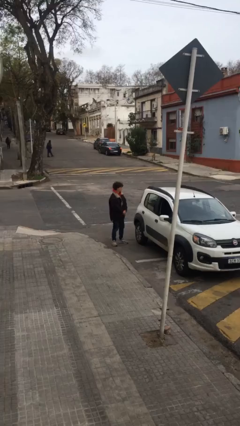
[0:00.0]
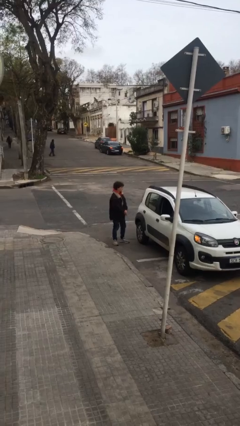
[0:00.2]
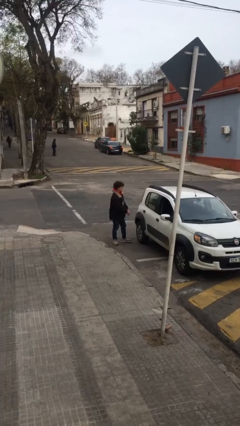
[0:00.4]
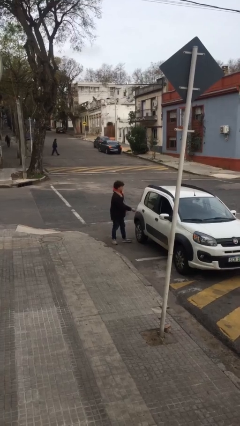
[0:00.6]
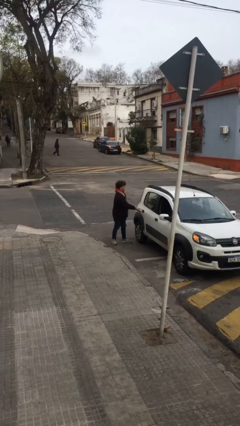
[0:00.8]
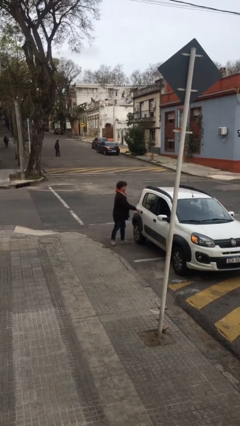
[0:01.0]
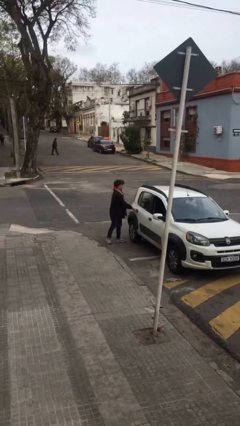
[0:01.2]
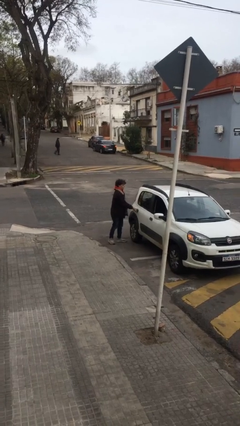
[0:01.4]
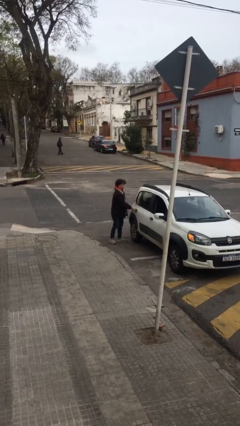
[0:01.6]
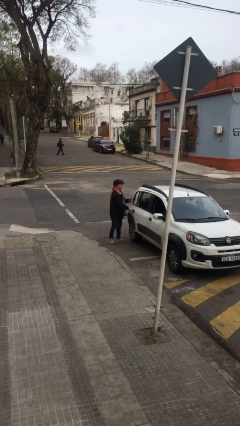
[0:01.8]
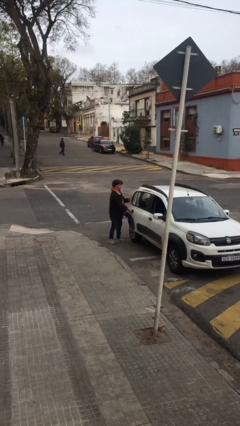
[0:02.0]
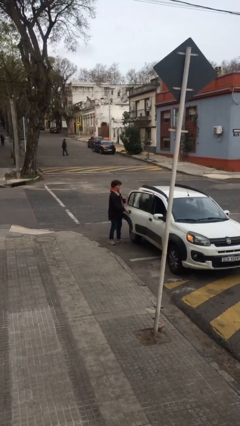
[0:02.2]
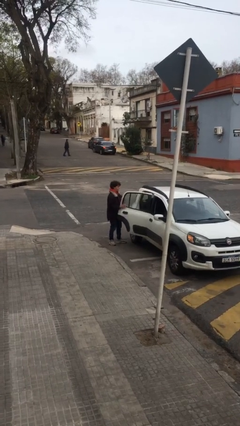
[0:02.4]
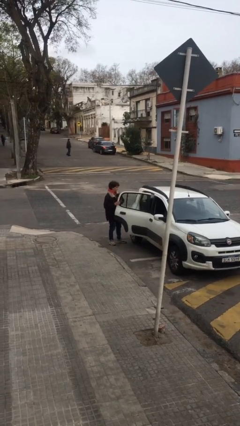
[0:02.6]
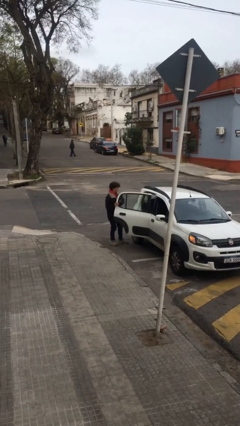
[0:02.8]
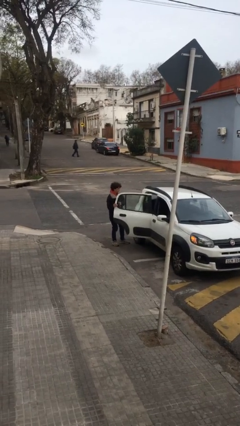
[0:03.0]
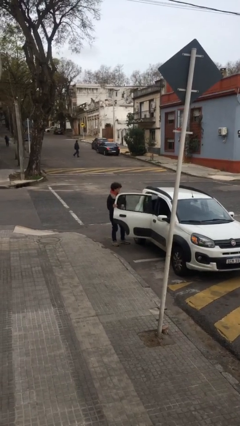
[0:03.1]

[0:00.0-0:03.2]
person opens car door

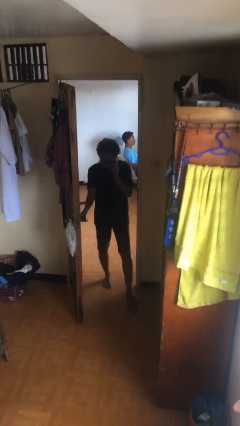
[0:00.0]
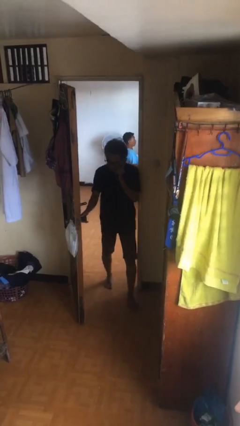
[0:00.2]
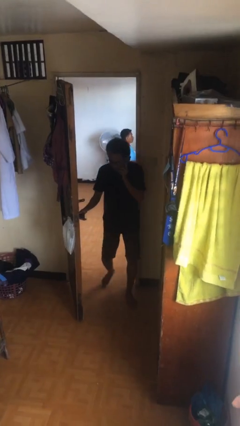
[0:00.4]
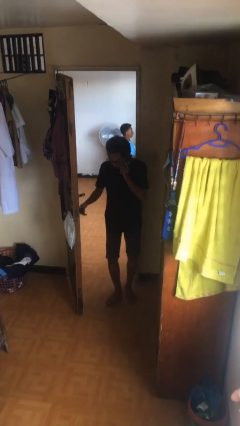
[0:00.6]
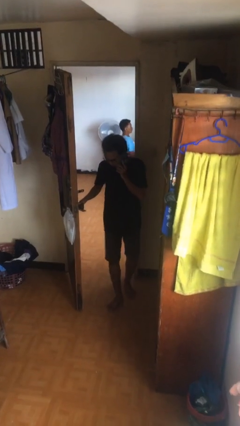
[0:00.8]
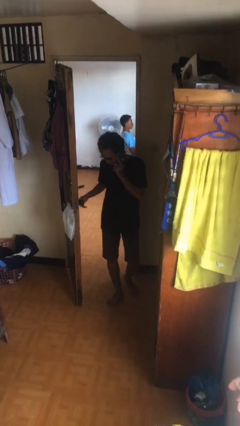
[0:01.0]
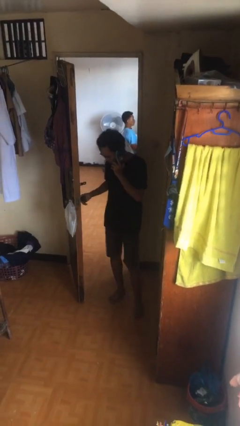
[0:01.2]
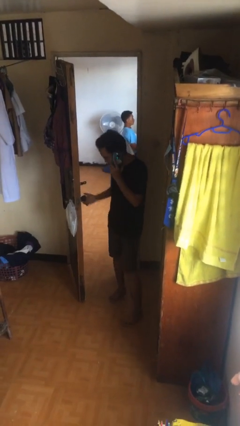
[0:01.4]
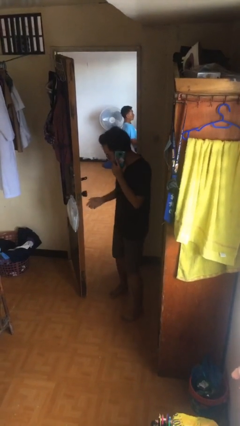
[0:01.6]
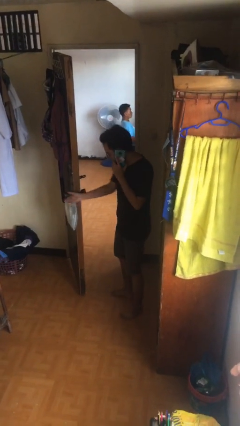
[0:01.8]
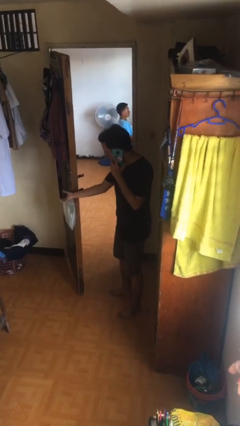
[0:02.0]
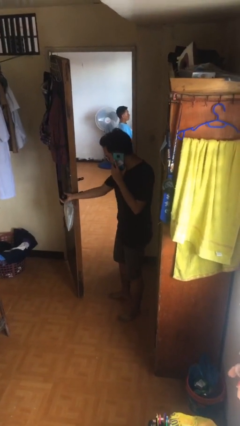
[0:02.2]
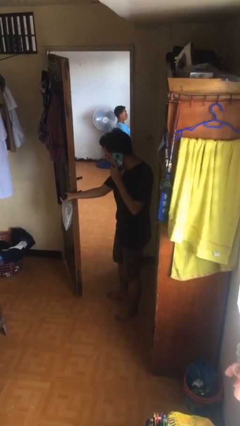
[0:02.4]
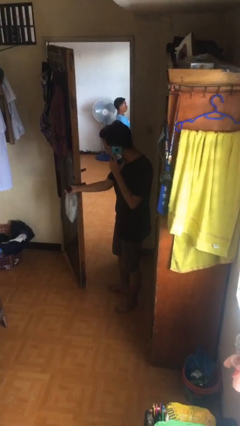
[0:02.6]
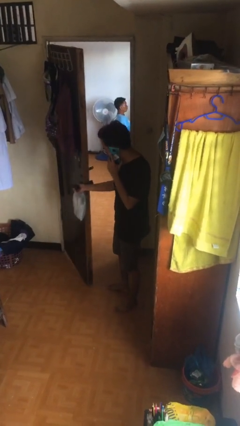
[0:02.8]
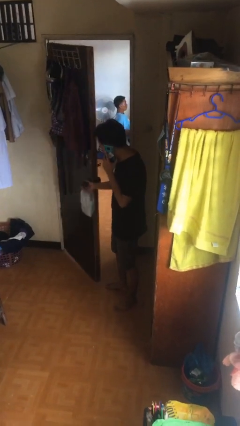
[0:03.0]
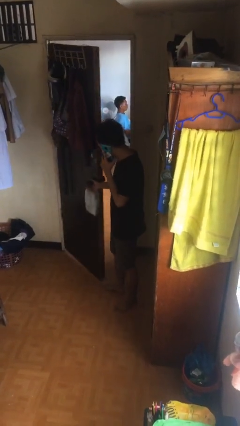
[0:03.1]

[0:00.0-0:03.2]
person enters scene through structure

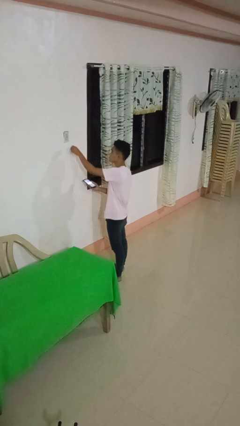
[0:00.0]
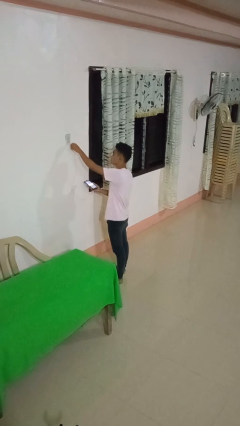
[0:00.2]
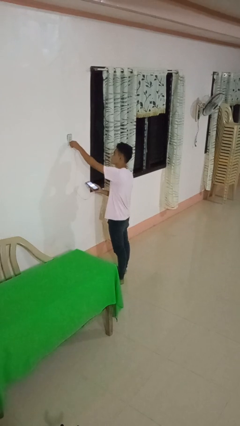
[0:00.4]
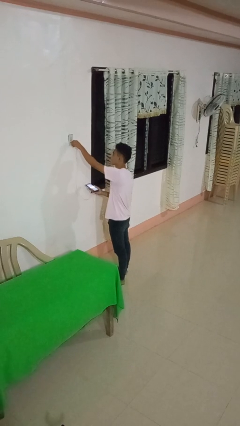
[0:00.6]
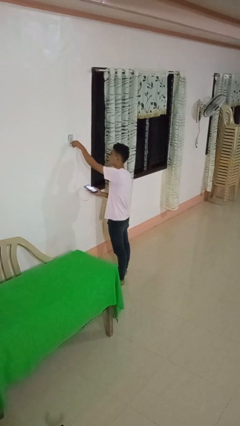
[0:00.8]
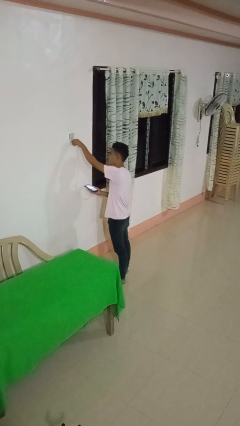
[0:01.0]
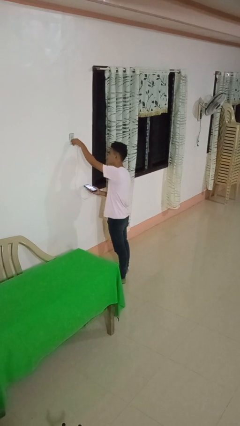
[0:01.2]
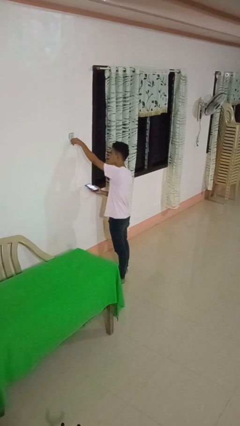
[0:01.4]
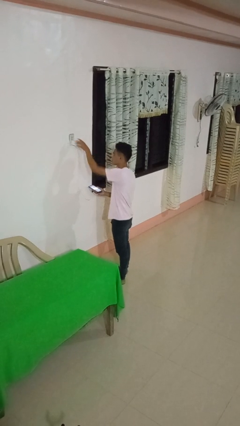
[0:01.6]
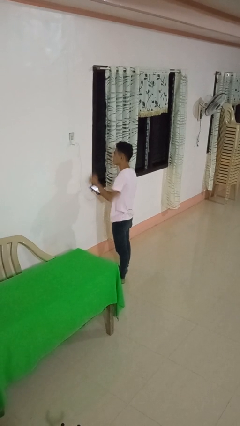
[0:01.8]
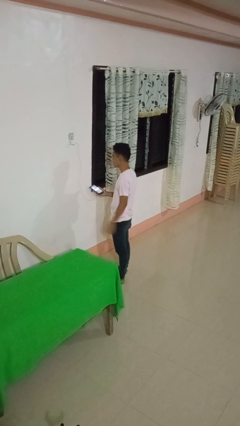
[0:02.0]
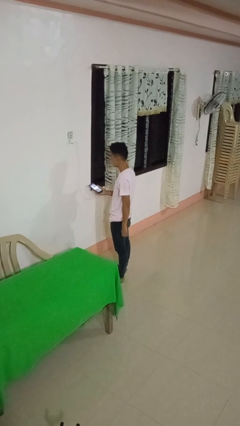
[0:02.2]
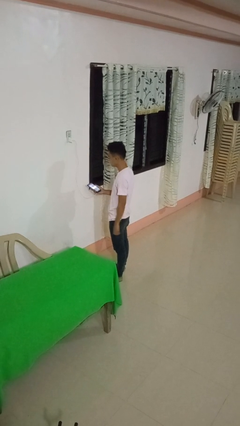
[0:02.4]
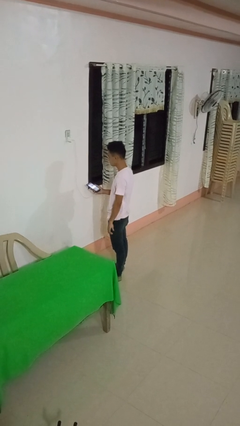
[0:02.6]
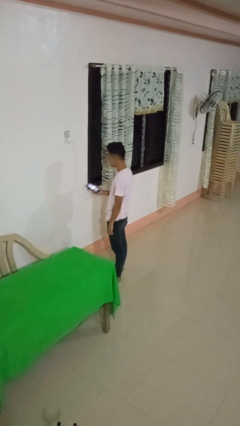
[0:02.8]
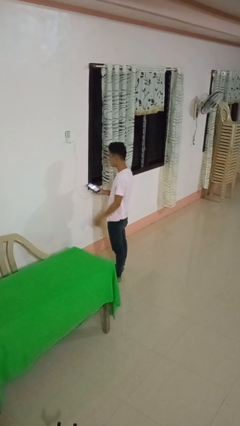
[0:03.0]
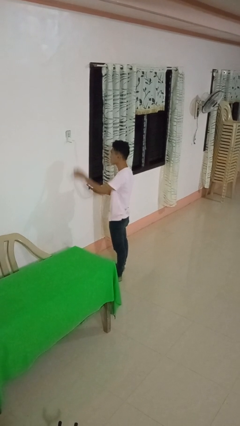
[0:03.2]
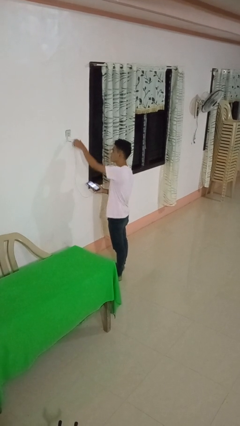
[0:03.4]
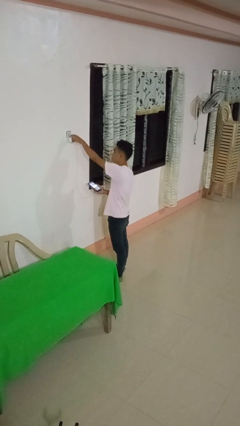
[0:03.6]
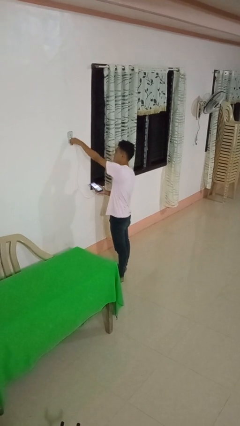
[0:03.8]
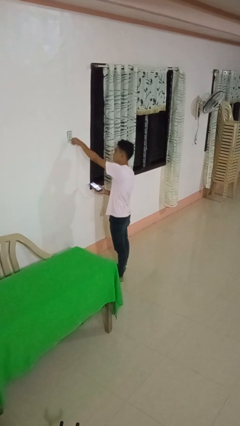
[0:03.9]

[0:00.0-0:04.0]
person plugs into electrical socket

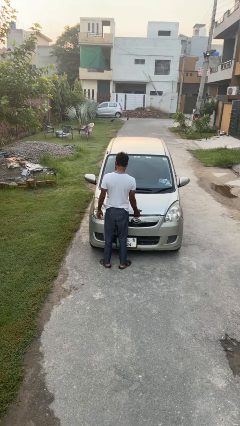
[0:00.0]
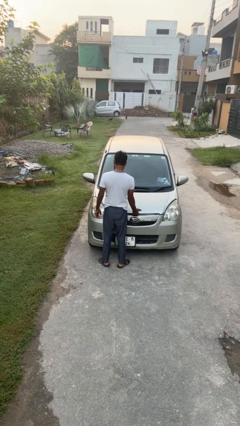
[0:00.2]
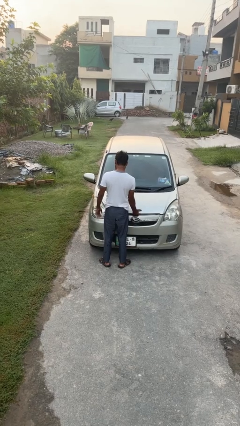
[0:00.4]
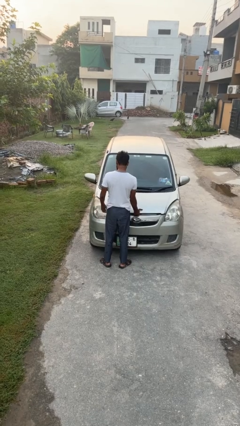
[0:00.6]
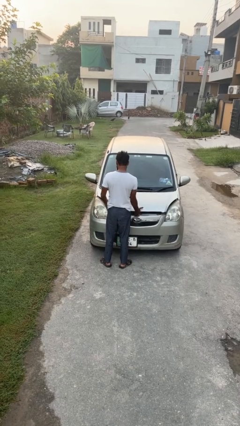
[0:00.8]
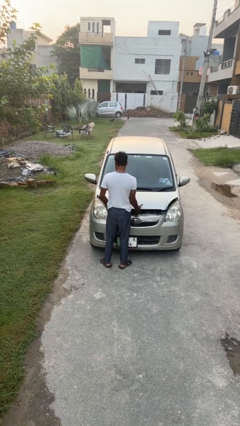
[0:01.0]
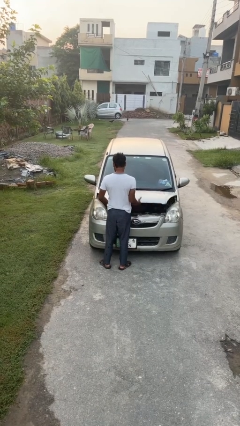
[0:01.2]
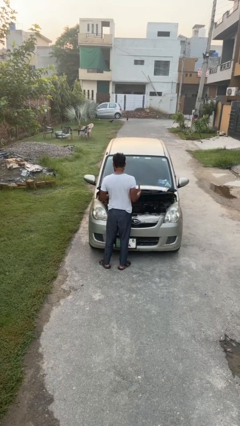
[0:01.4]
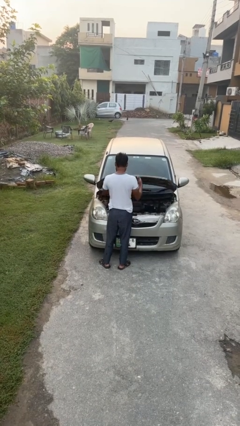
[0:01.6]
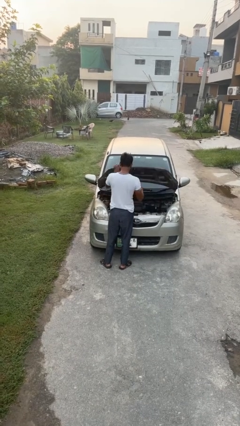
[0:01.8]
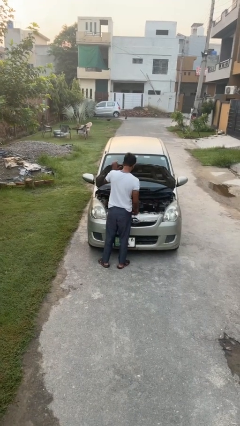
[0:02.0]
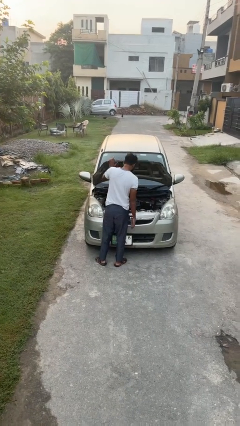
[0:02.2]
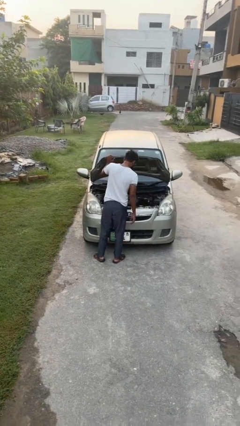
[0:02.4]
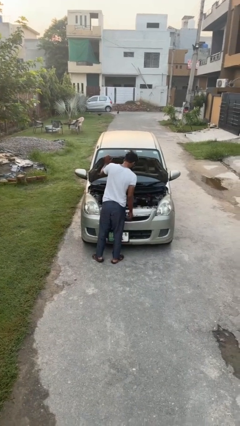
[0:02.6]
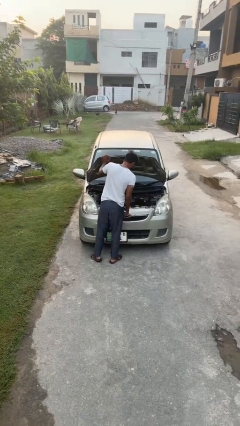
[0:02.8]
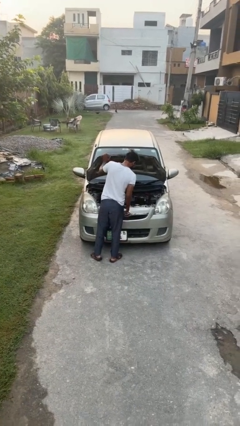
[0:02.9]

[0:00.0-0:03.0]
person opens car hood

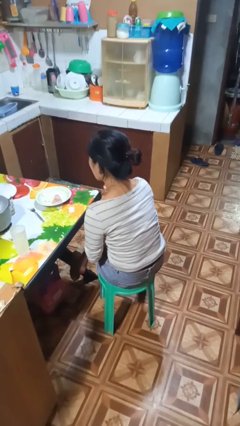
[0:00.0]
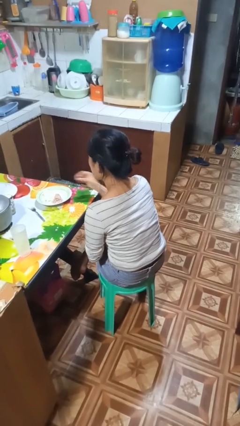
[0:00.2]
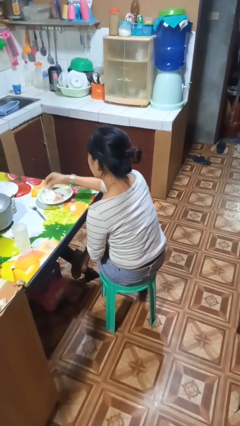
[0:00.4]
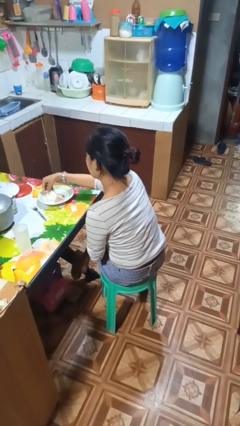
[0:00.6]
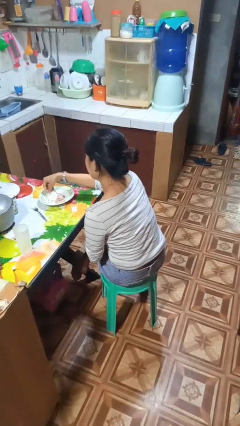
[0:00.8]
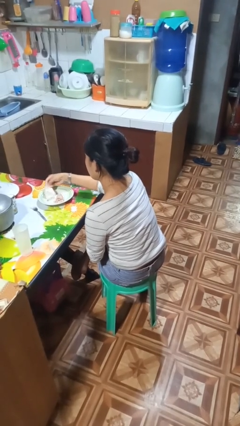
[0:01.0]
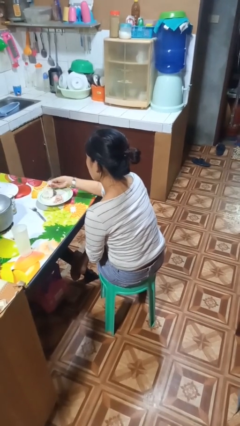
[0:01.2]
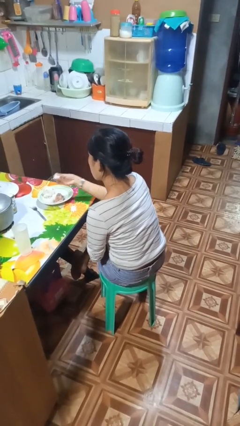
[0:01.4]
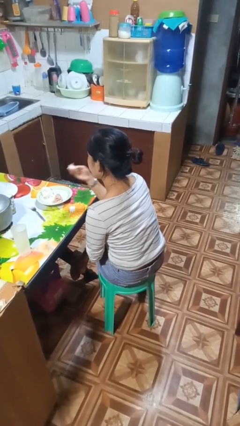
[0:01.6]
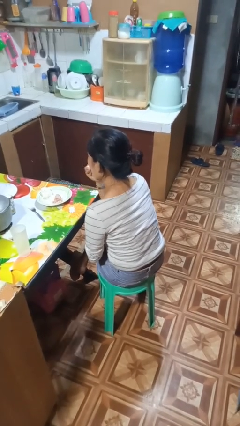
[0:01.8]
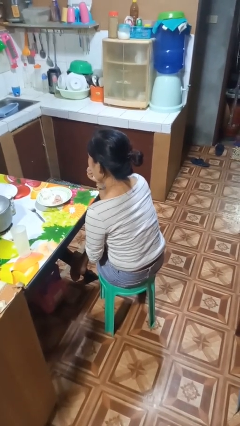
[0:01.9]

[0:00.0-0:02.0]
person eats with hands

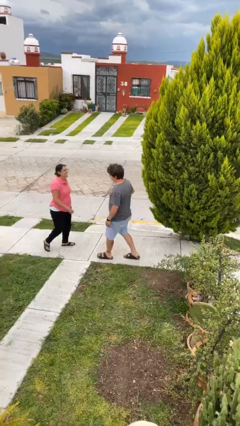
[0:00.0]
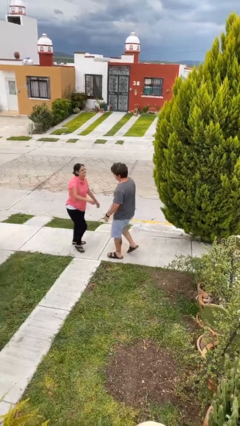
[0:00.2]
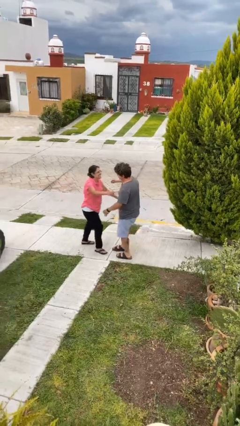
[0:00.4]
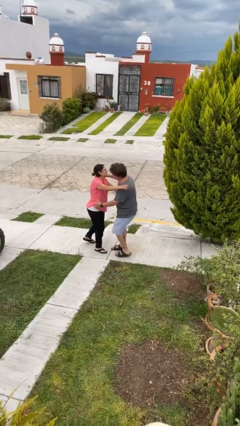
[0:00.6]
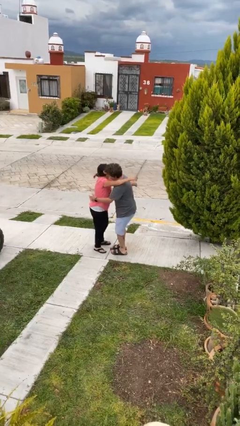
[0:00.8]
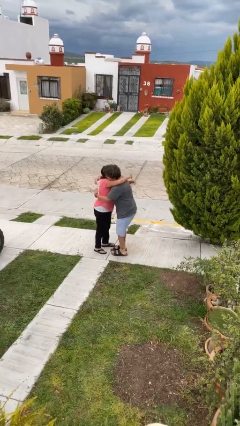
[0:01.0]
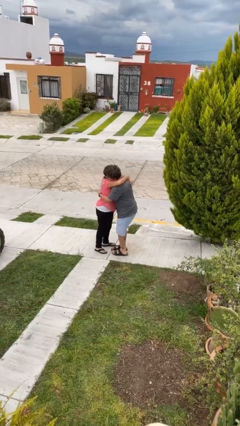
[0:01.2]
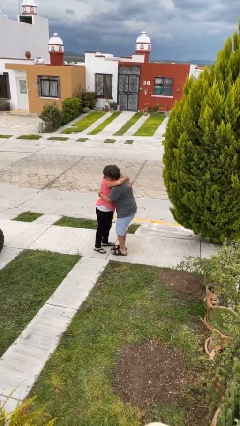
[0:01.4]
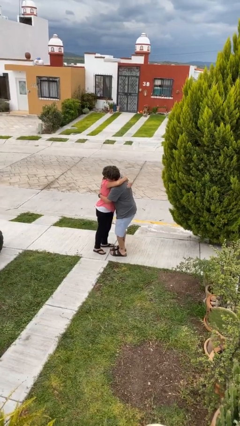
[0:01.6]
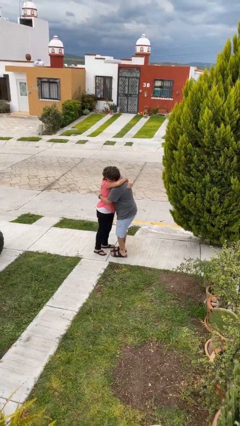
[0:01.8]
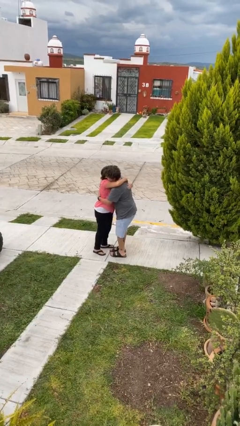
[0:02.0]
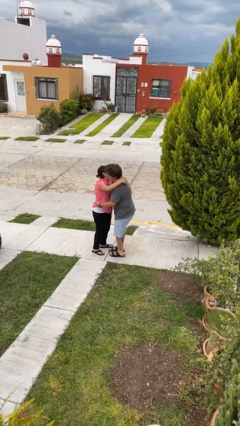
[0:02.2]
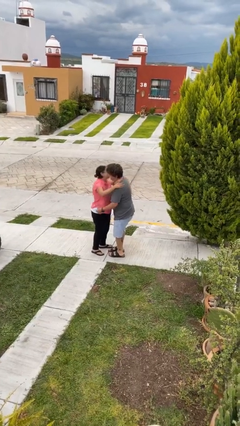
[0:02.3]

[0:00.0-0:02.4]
person embraces person
